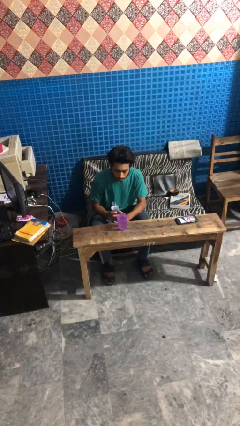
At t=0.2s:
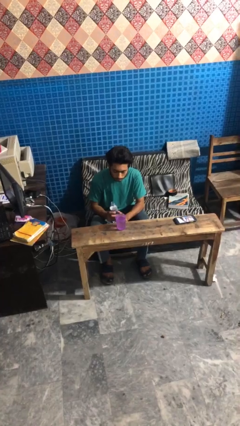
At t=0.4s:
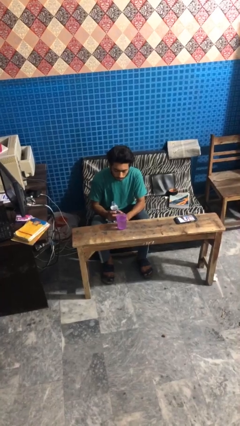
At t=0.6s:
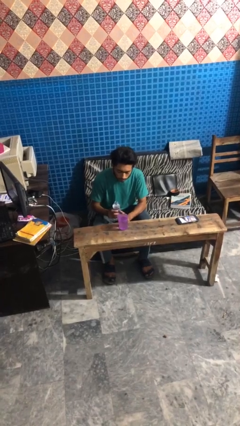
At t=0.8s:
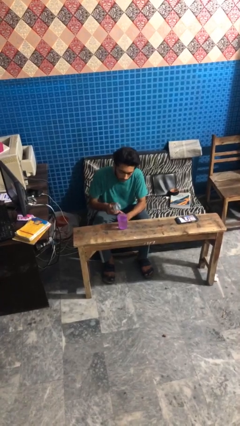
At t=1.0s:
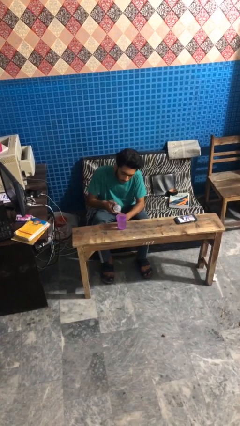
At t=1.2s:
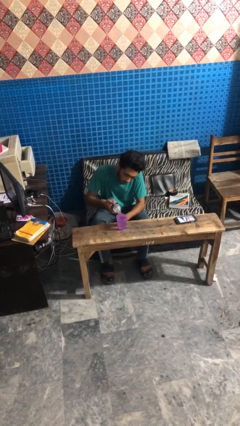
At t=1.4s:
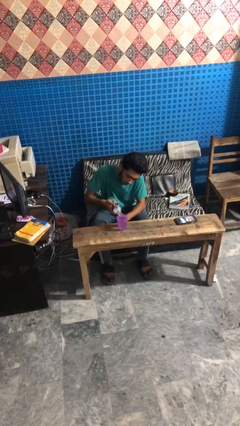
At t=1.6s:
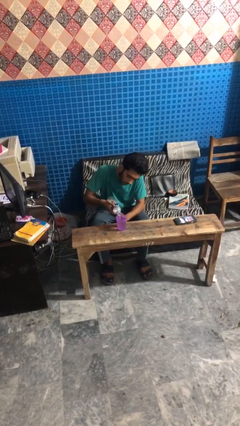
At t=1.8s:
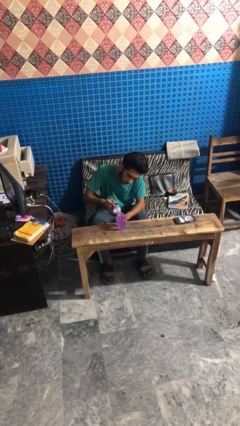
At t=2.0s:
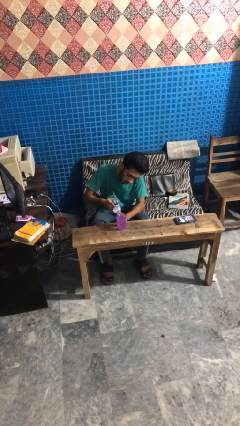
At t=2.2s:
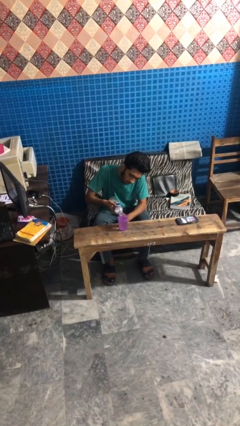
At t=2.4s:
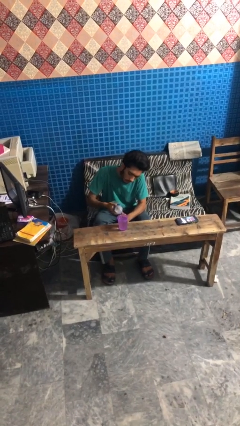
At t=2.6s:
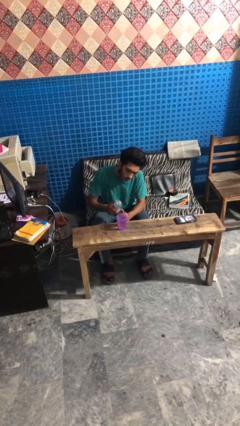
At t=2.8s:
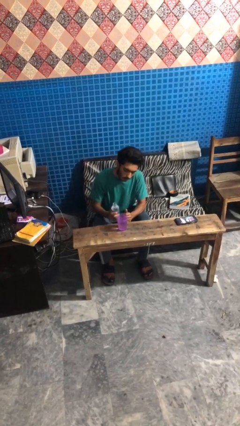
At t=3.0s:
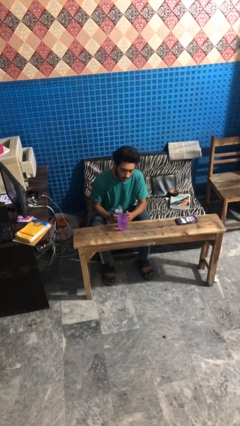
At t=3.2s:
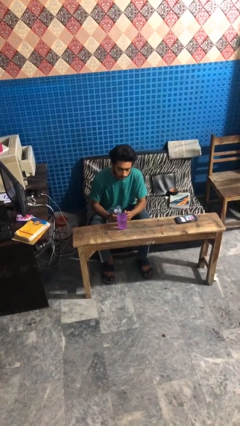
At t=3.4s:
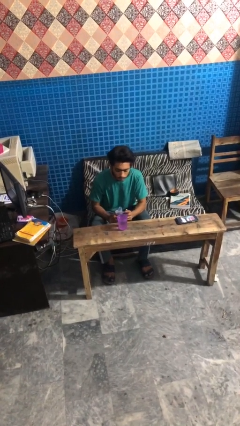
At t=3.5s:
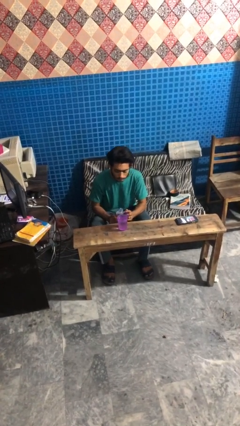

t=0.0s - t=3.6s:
person pours liquid into cup

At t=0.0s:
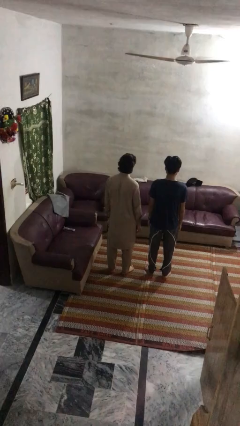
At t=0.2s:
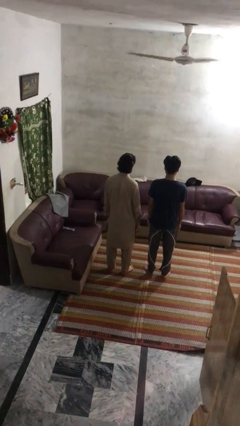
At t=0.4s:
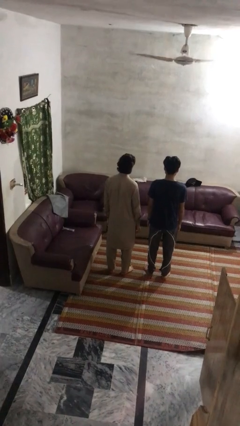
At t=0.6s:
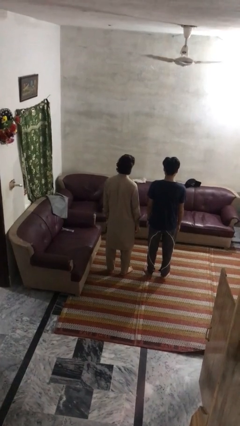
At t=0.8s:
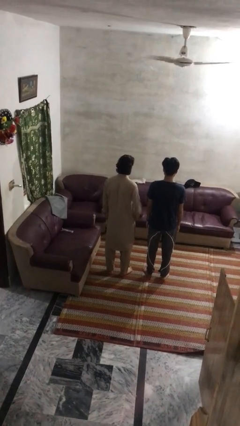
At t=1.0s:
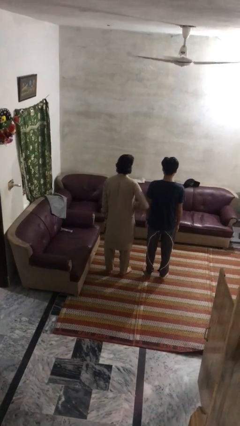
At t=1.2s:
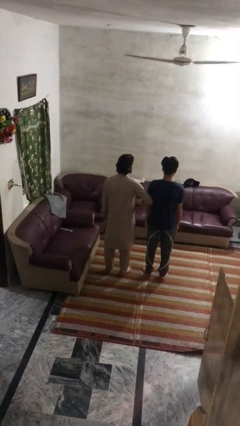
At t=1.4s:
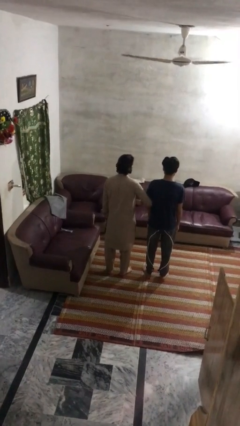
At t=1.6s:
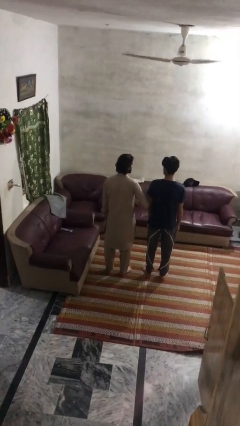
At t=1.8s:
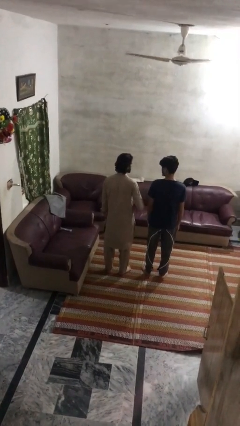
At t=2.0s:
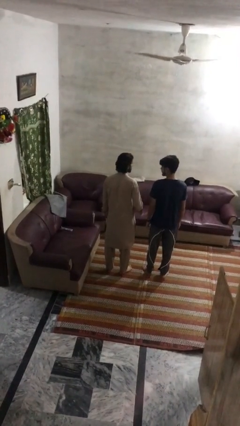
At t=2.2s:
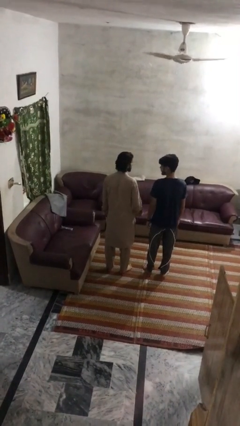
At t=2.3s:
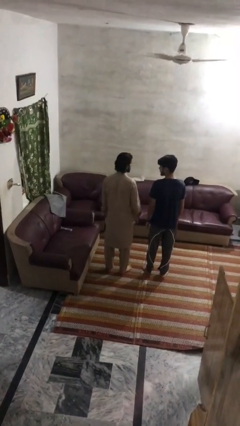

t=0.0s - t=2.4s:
person nudges person with elbow

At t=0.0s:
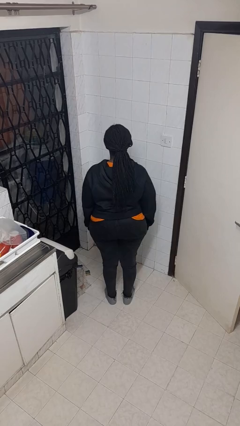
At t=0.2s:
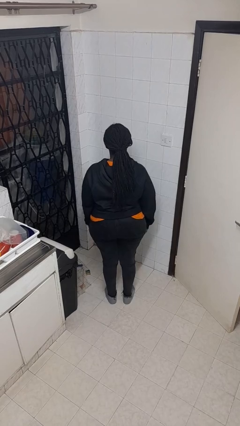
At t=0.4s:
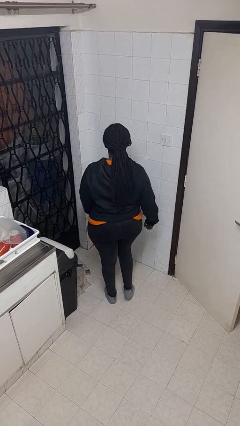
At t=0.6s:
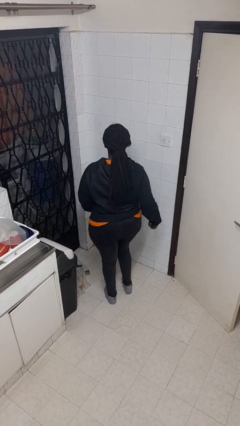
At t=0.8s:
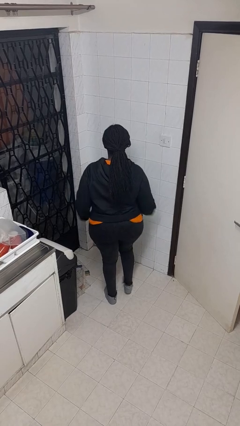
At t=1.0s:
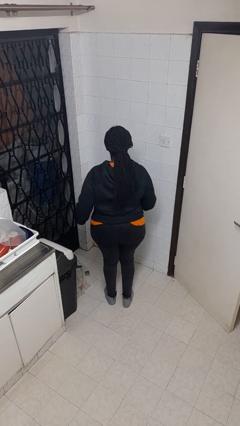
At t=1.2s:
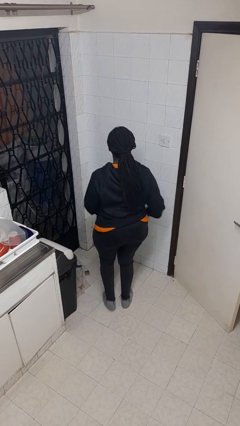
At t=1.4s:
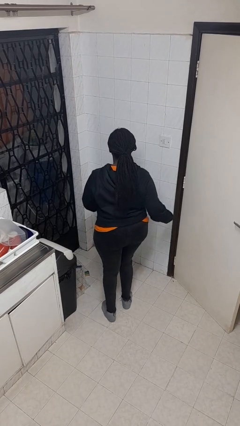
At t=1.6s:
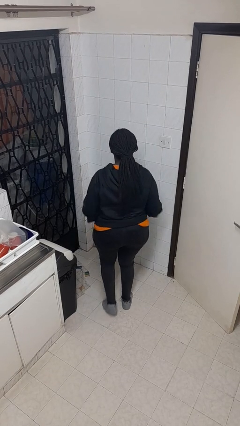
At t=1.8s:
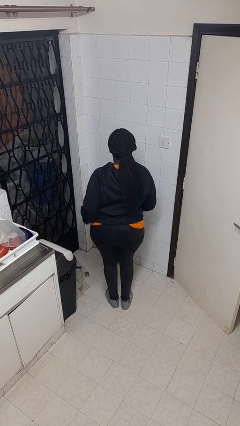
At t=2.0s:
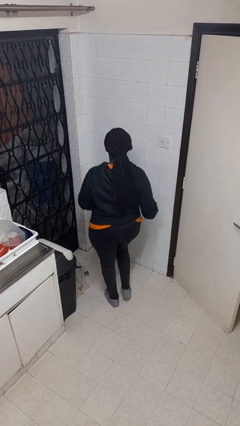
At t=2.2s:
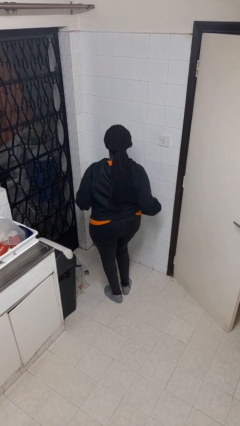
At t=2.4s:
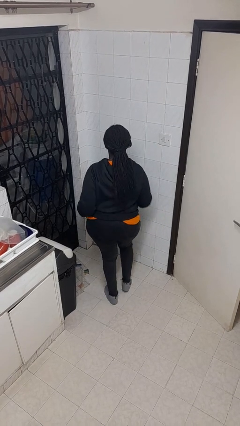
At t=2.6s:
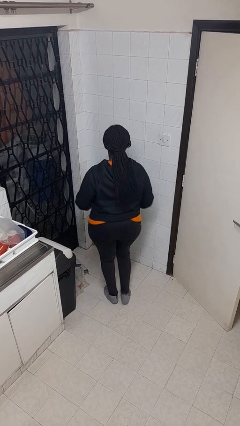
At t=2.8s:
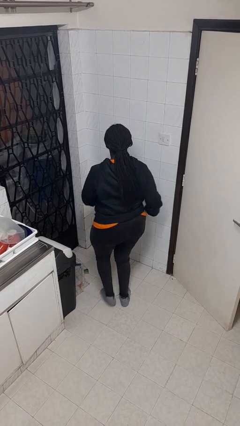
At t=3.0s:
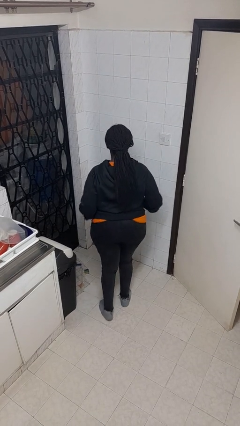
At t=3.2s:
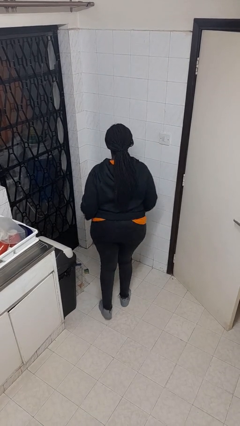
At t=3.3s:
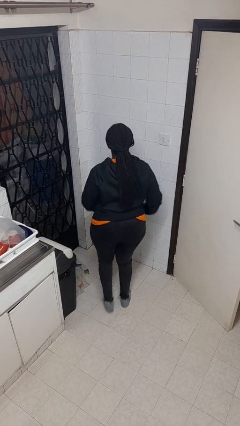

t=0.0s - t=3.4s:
person dances in place

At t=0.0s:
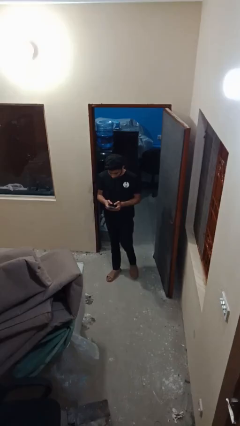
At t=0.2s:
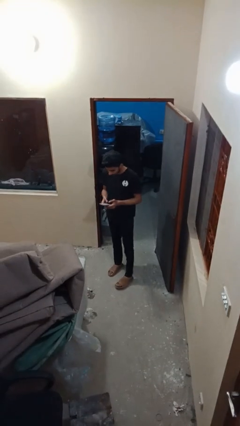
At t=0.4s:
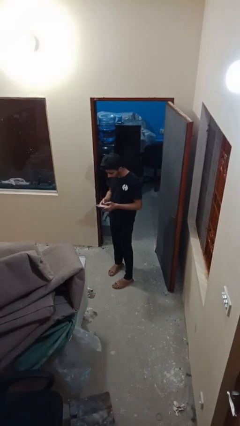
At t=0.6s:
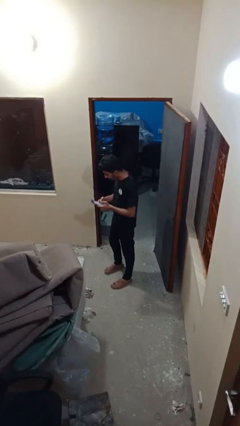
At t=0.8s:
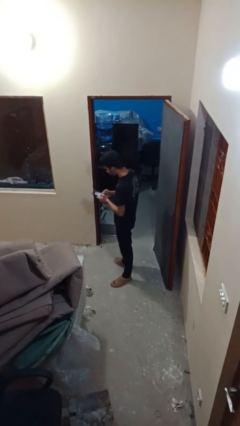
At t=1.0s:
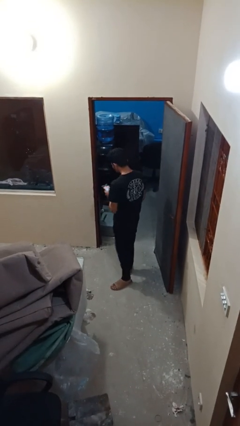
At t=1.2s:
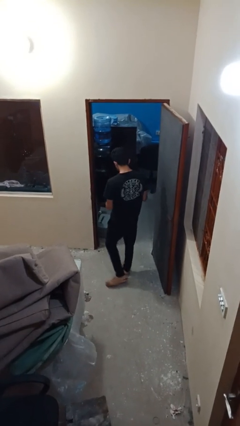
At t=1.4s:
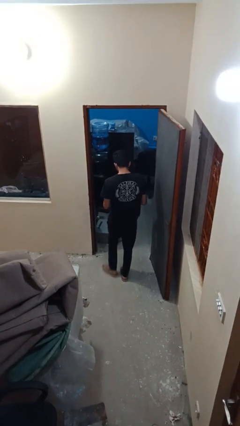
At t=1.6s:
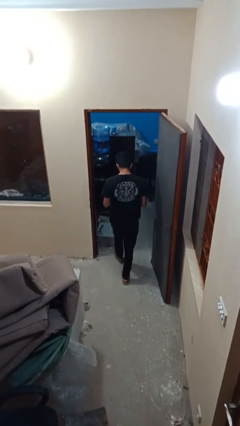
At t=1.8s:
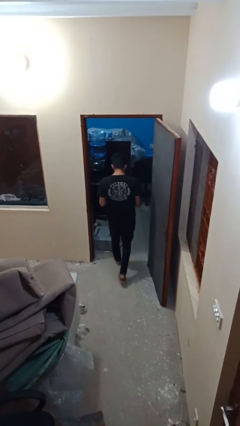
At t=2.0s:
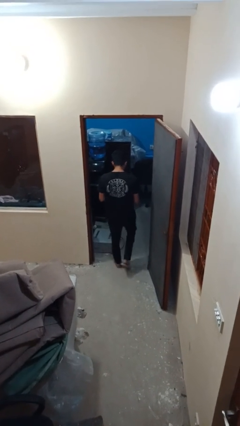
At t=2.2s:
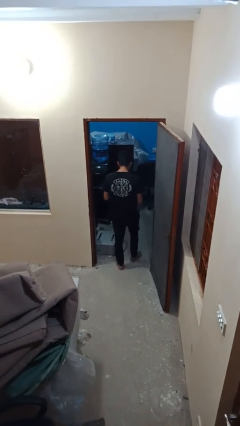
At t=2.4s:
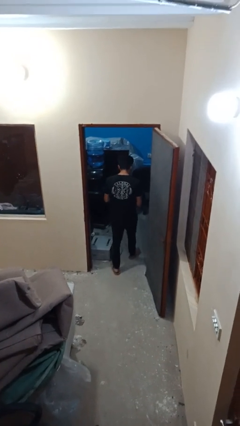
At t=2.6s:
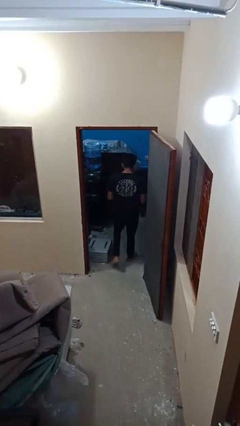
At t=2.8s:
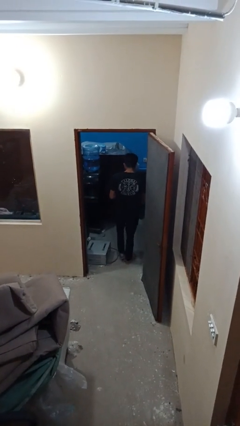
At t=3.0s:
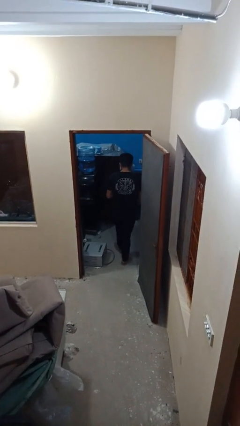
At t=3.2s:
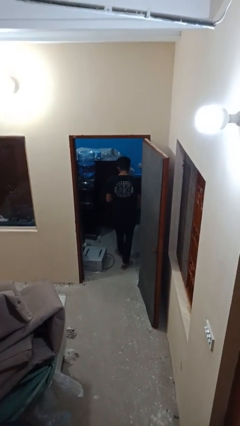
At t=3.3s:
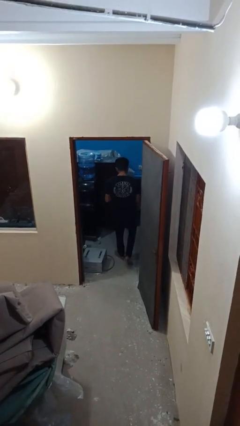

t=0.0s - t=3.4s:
person exits scene through structure

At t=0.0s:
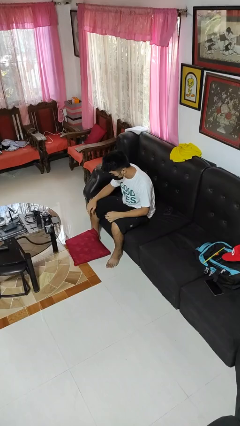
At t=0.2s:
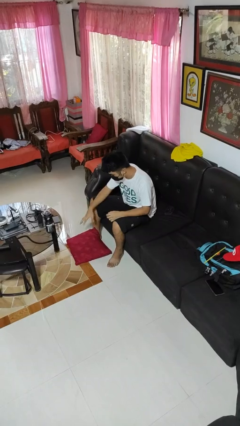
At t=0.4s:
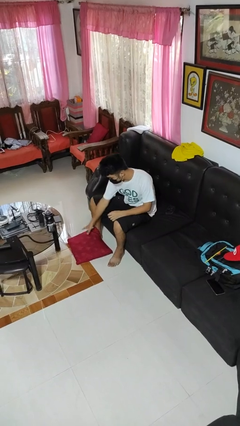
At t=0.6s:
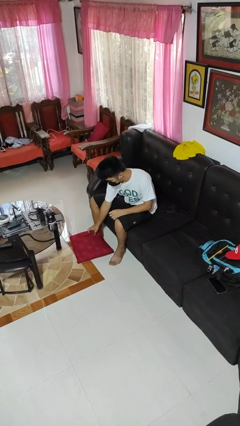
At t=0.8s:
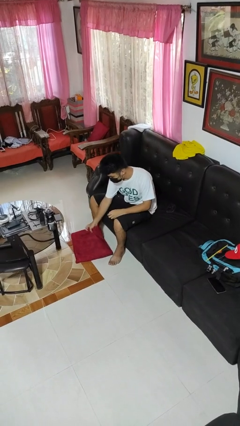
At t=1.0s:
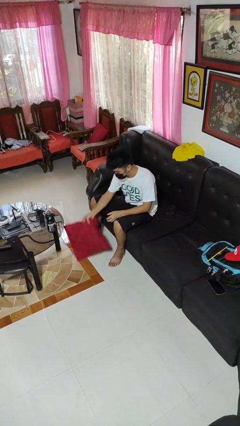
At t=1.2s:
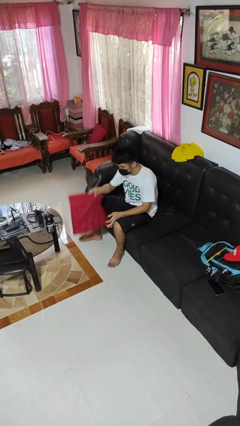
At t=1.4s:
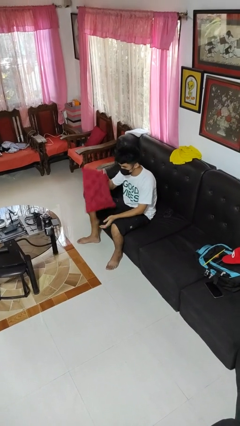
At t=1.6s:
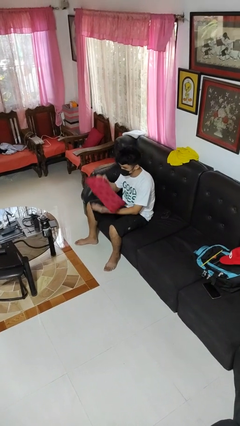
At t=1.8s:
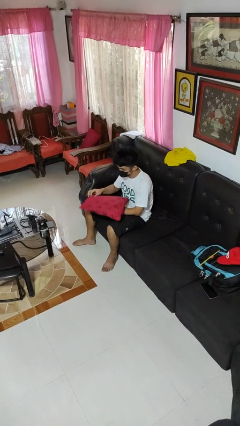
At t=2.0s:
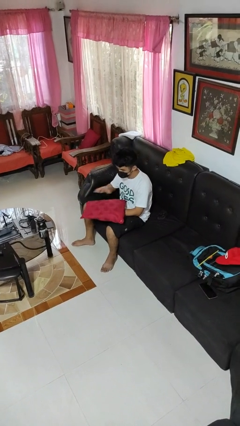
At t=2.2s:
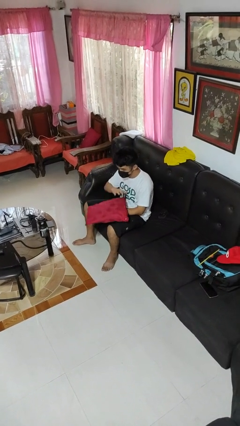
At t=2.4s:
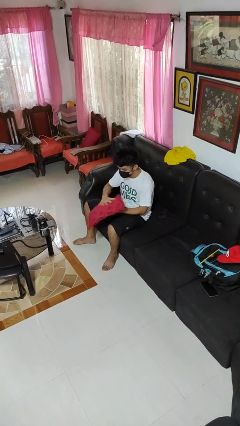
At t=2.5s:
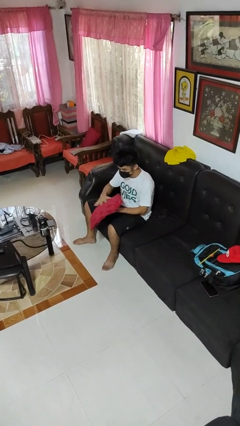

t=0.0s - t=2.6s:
person picks up object from floor

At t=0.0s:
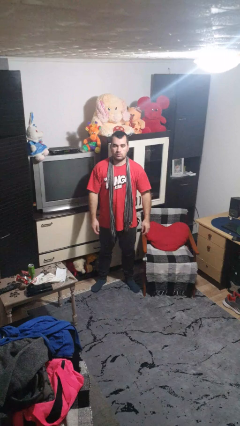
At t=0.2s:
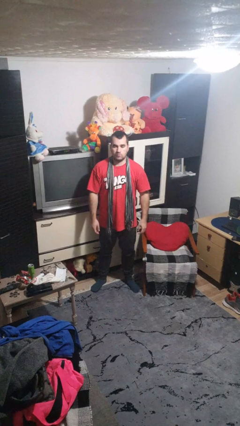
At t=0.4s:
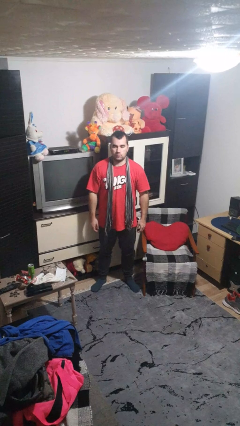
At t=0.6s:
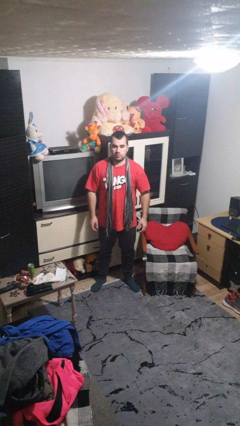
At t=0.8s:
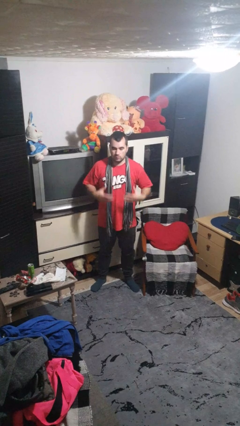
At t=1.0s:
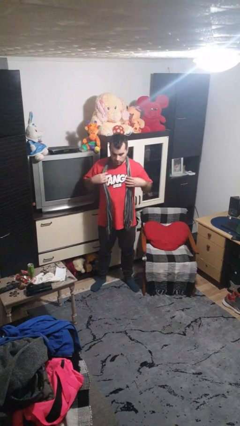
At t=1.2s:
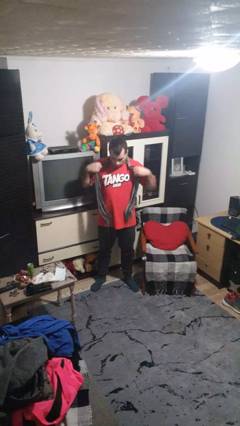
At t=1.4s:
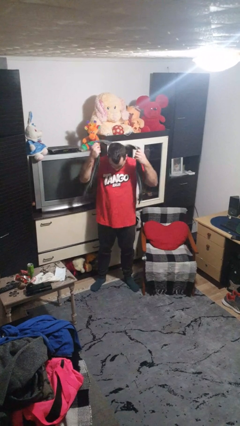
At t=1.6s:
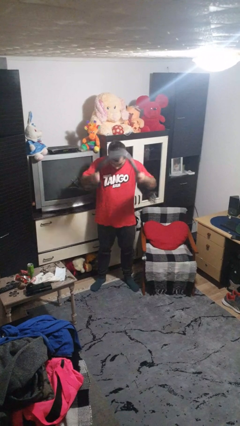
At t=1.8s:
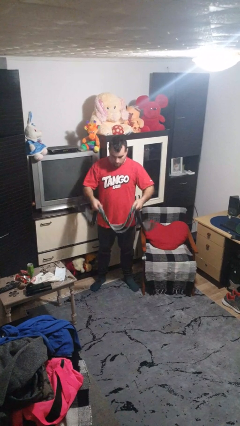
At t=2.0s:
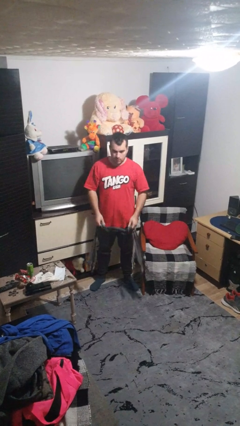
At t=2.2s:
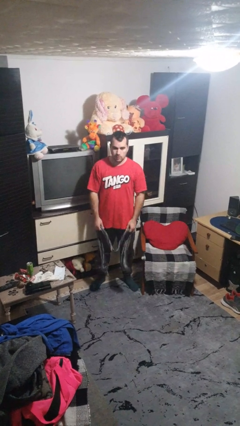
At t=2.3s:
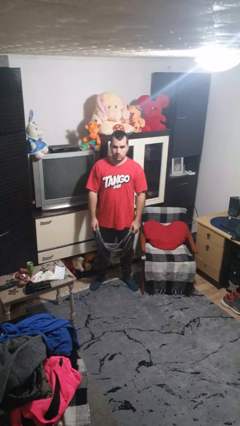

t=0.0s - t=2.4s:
person takes off scarf
